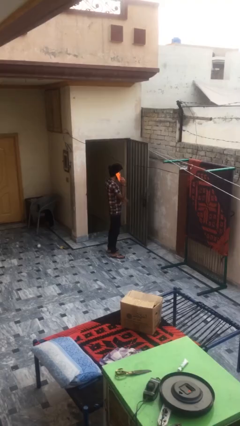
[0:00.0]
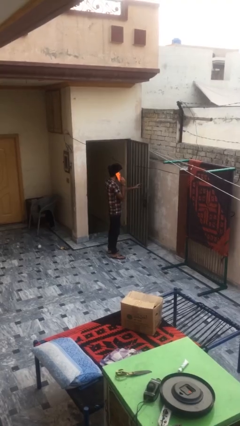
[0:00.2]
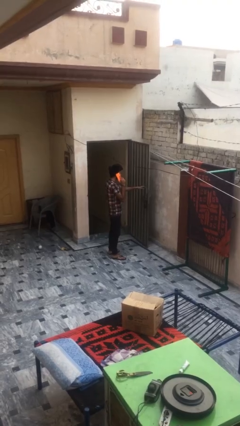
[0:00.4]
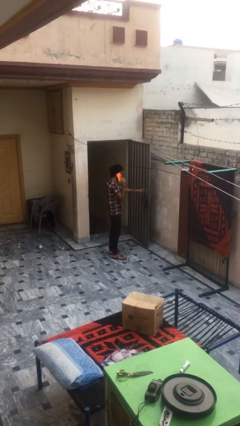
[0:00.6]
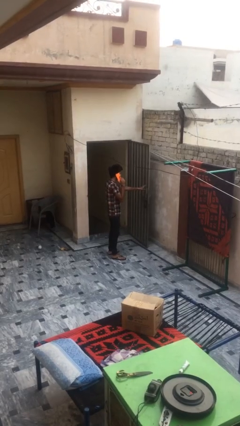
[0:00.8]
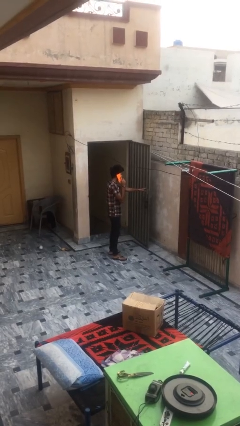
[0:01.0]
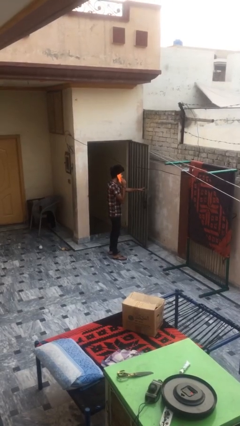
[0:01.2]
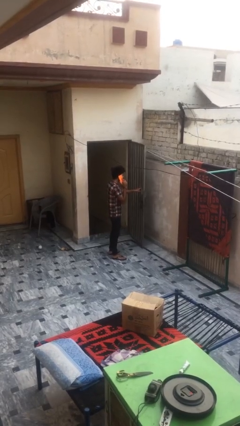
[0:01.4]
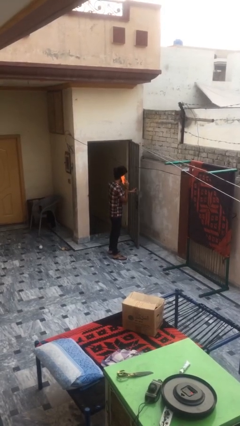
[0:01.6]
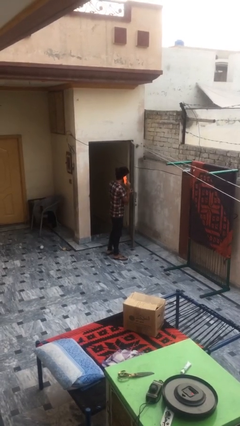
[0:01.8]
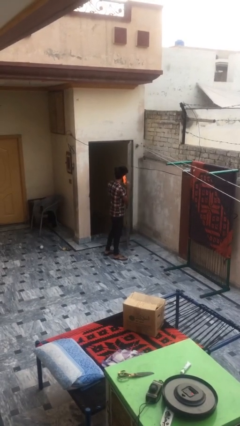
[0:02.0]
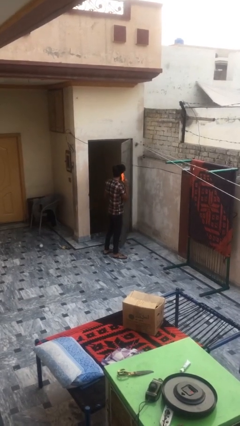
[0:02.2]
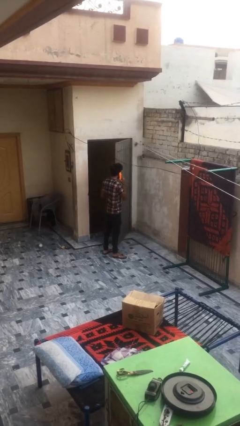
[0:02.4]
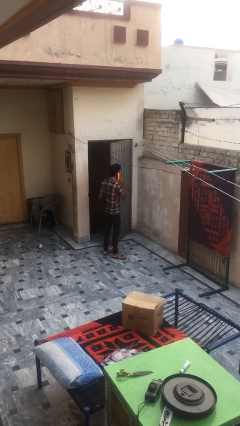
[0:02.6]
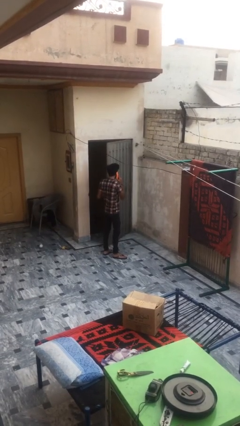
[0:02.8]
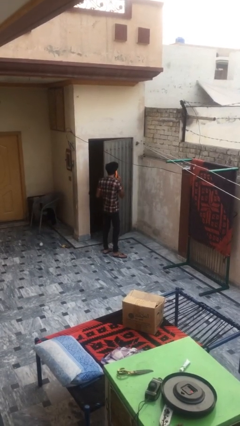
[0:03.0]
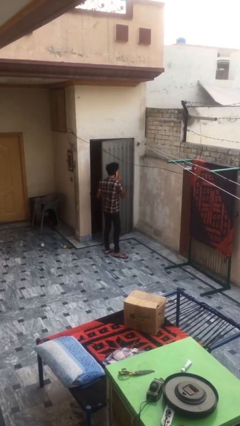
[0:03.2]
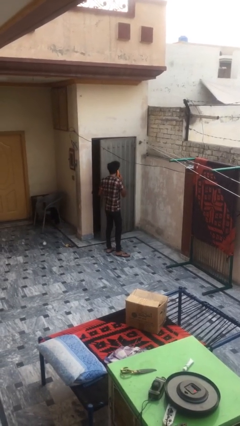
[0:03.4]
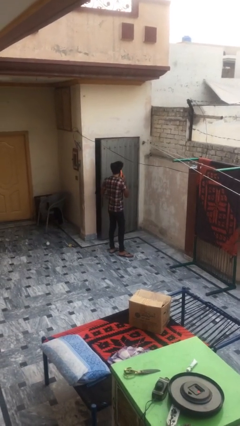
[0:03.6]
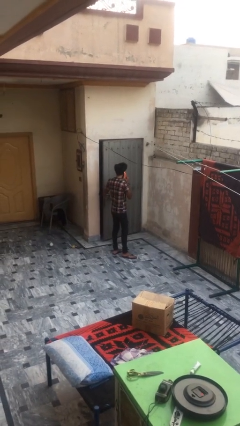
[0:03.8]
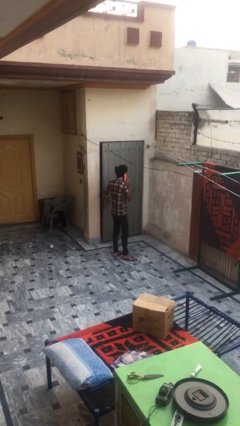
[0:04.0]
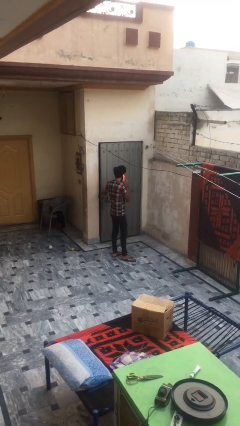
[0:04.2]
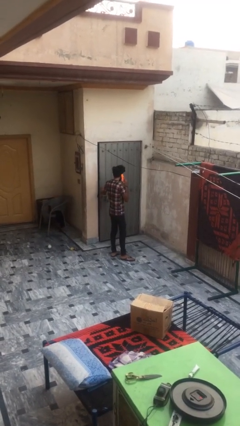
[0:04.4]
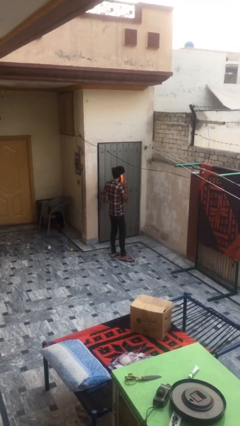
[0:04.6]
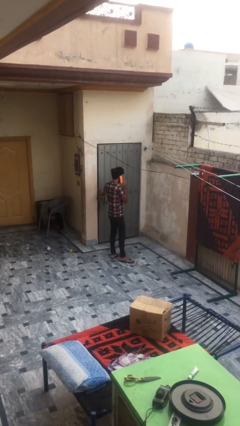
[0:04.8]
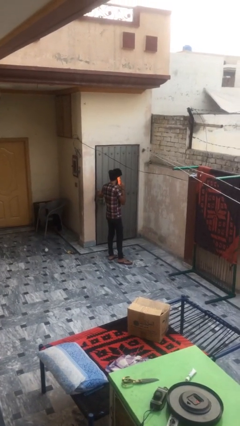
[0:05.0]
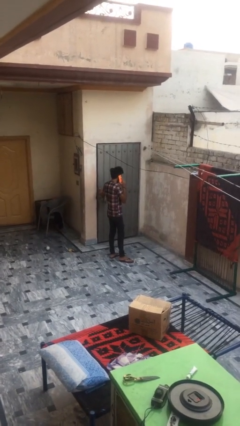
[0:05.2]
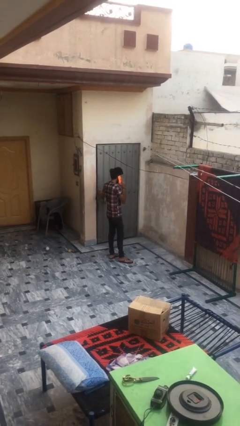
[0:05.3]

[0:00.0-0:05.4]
person closes facility door

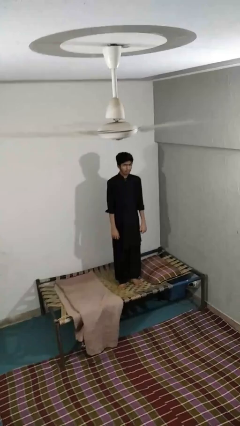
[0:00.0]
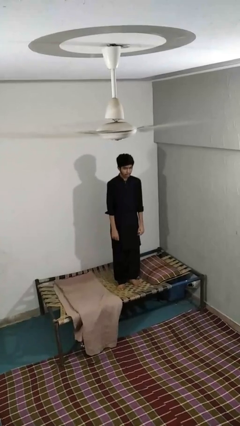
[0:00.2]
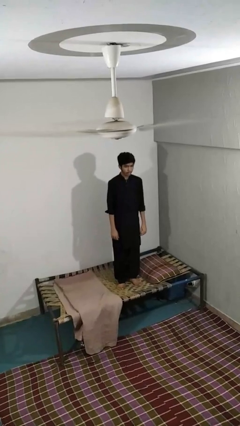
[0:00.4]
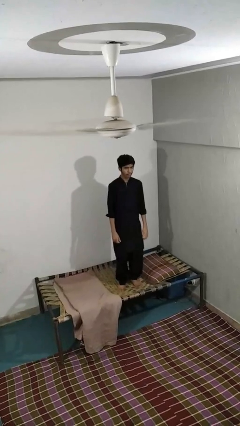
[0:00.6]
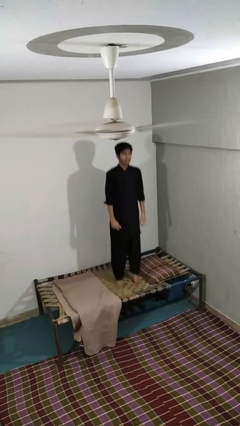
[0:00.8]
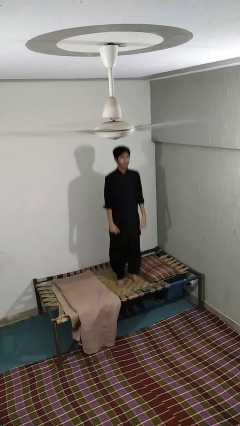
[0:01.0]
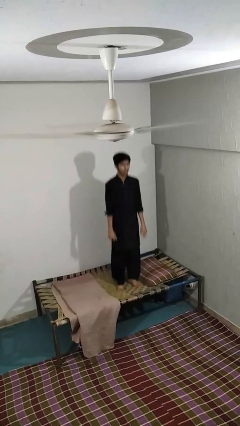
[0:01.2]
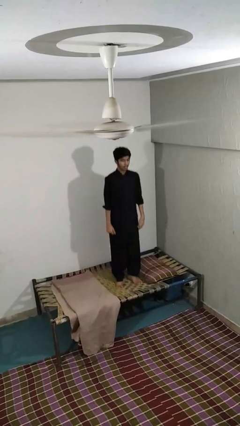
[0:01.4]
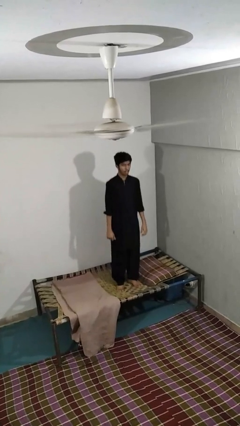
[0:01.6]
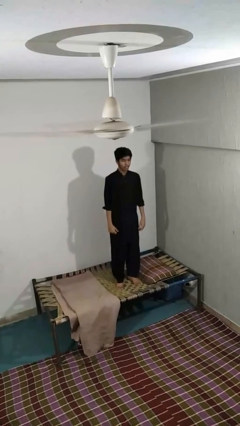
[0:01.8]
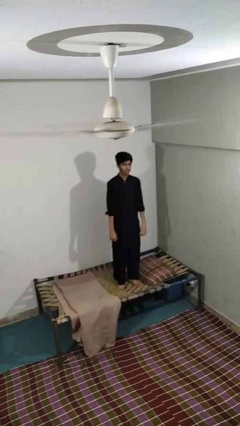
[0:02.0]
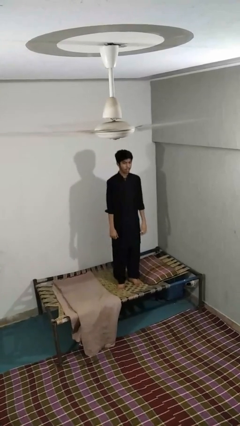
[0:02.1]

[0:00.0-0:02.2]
person jumps on bed

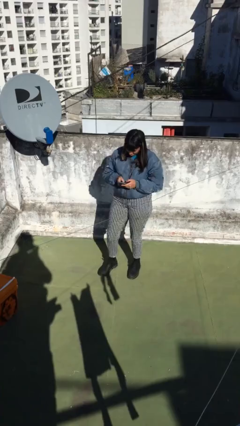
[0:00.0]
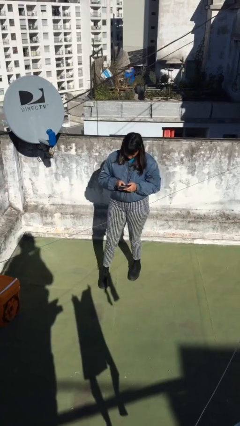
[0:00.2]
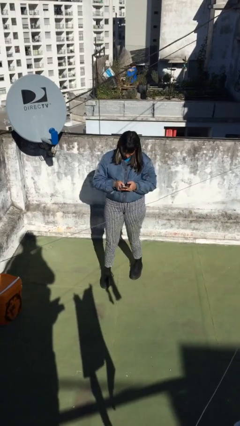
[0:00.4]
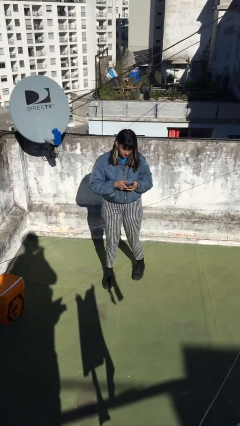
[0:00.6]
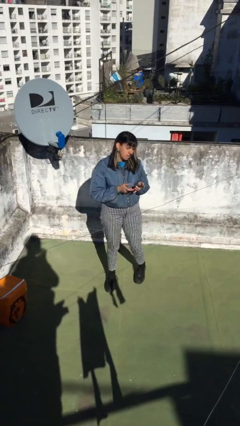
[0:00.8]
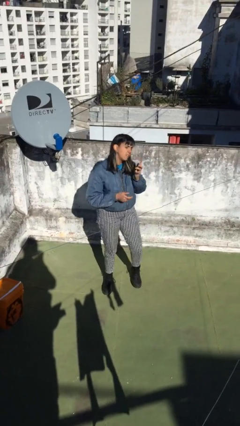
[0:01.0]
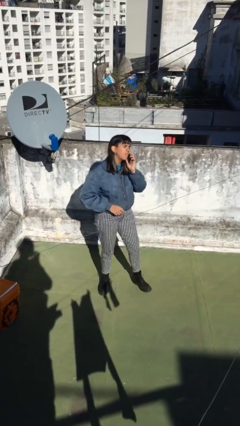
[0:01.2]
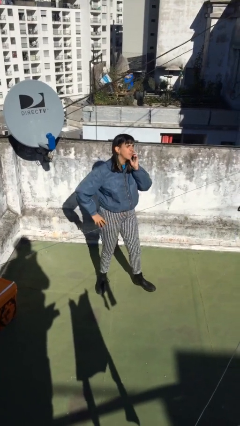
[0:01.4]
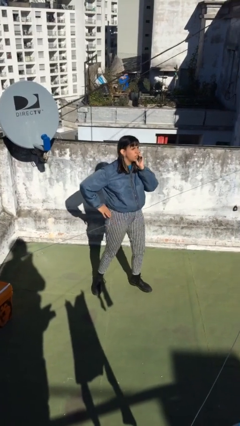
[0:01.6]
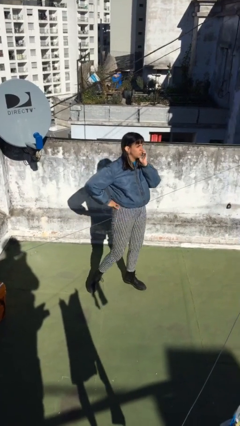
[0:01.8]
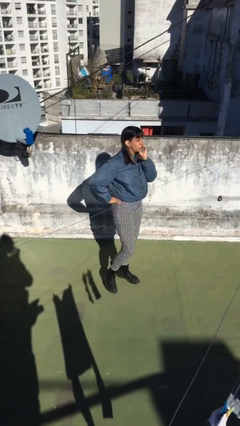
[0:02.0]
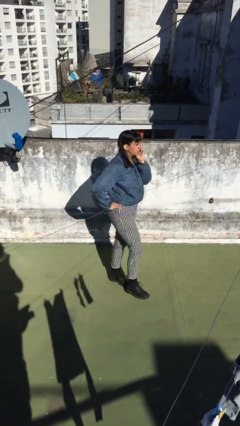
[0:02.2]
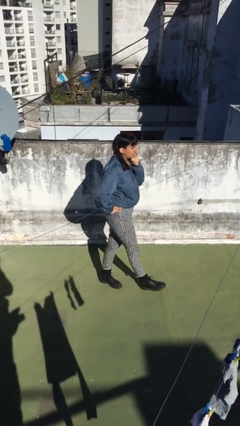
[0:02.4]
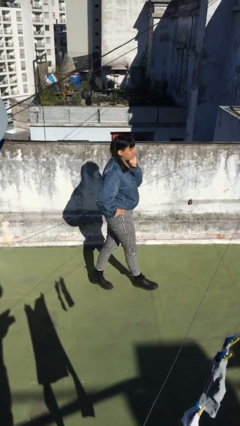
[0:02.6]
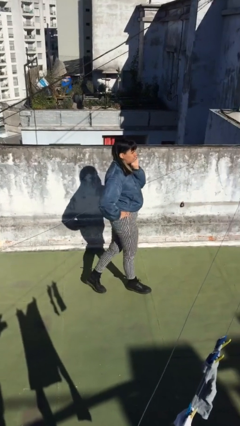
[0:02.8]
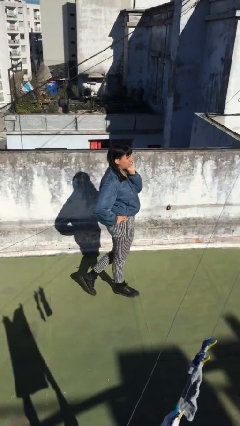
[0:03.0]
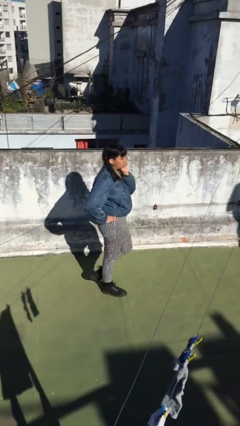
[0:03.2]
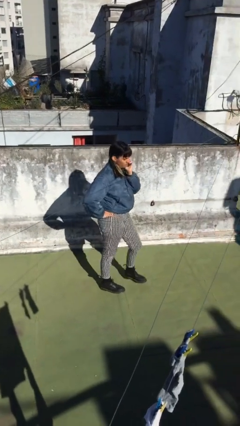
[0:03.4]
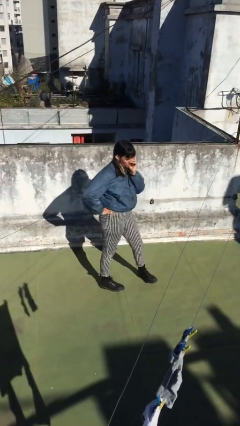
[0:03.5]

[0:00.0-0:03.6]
person talks on phone

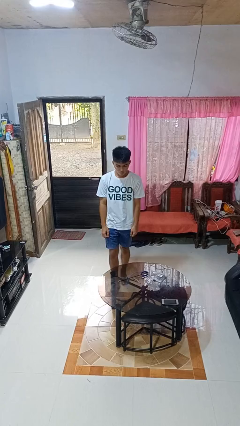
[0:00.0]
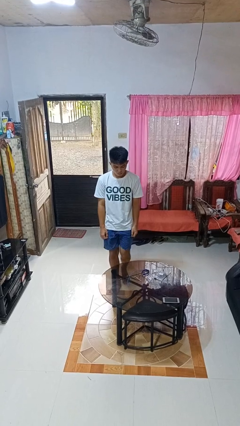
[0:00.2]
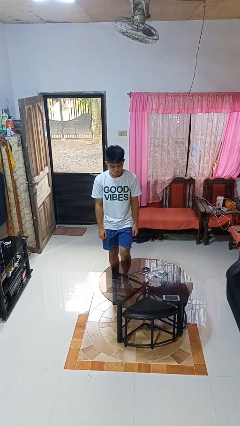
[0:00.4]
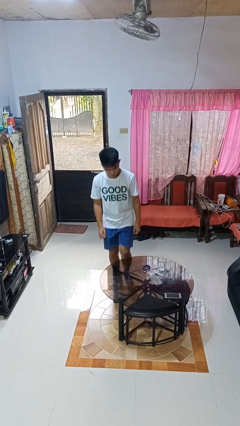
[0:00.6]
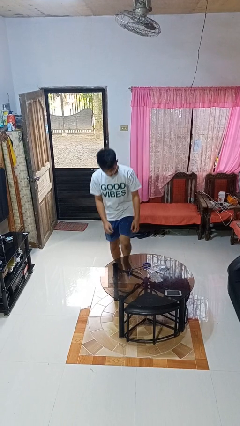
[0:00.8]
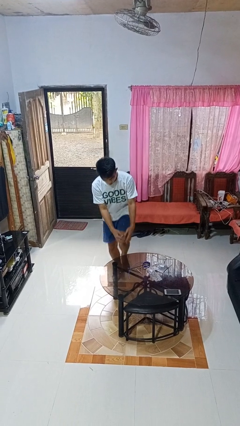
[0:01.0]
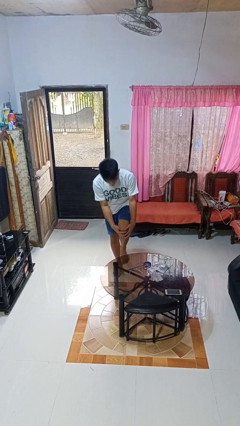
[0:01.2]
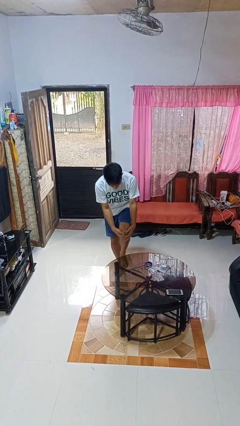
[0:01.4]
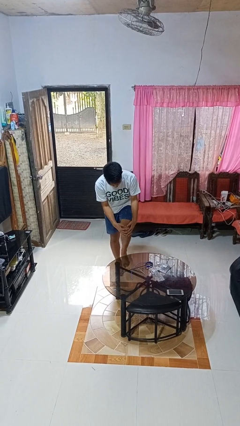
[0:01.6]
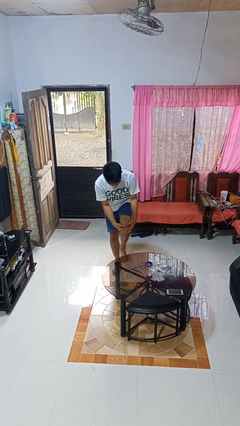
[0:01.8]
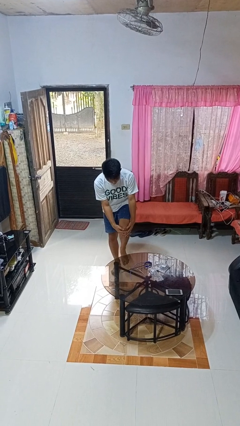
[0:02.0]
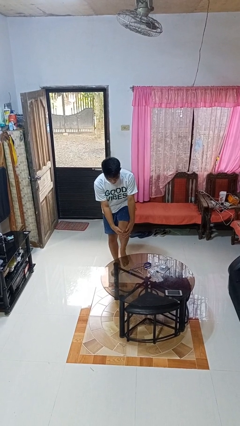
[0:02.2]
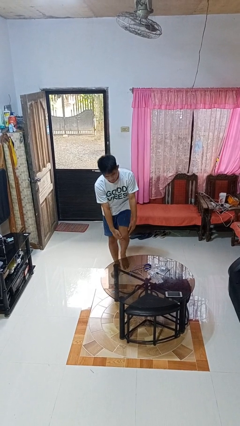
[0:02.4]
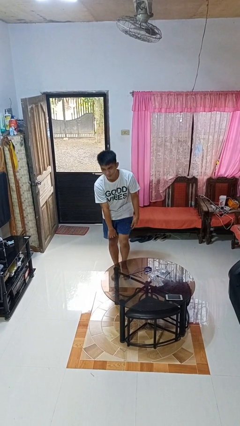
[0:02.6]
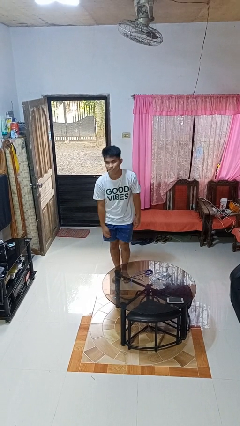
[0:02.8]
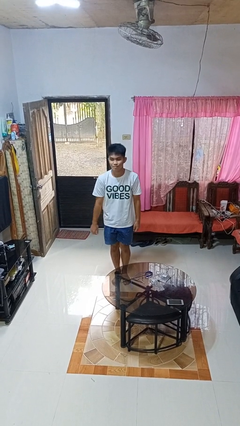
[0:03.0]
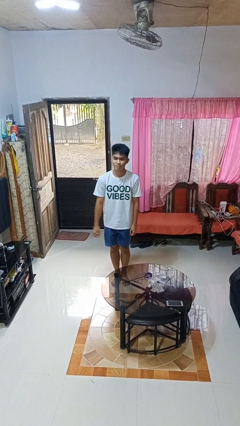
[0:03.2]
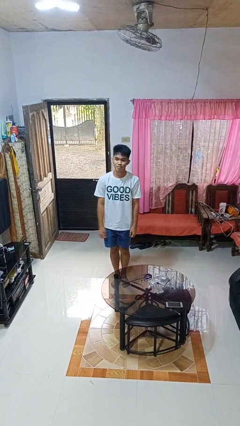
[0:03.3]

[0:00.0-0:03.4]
person bumps into table

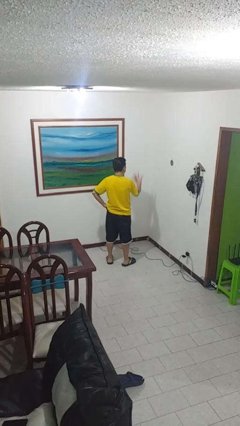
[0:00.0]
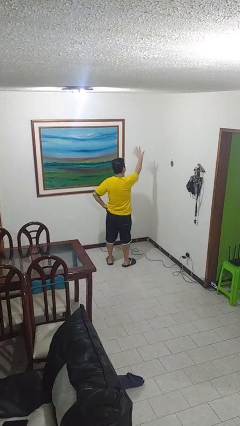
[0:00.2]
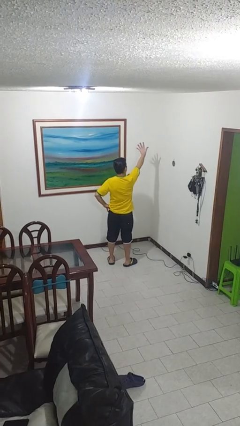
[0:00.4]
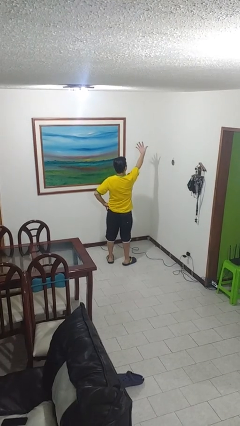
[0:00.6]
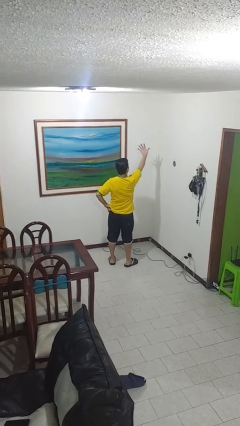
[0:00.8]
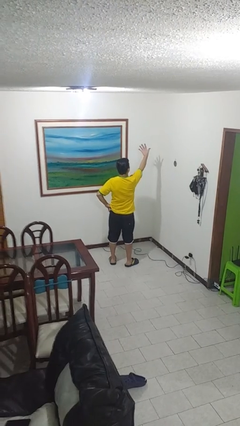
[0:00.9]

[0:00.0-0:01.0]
person gestures number five

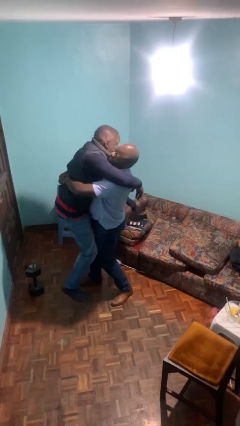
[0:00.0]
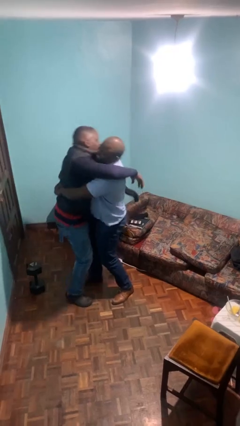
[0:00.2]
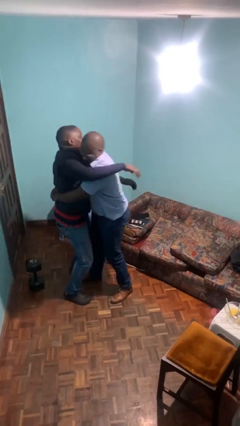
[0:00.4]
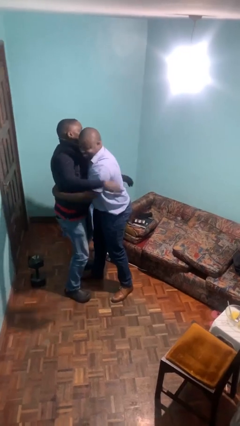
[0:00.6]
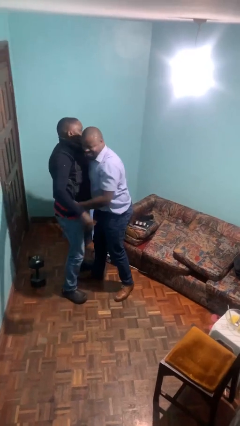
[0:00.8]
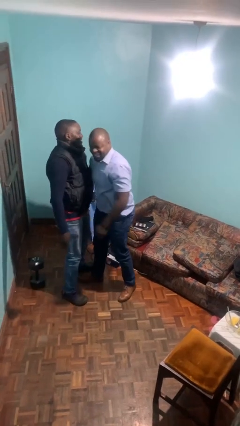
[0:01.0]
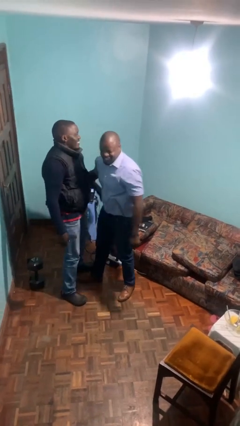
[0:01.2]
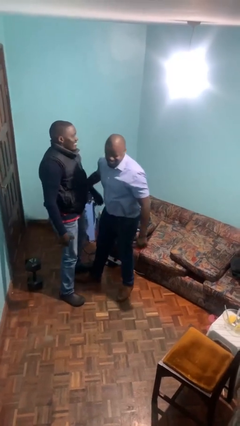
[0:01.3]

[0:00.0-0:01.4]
person puts down person

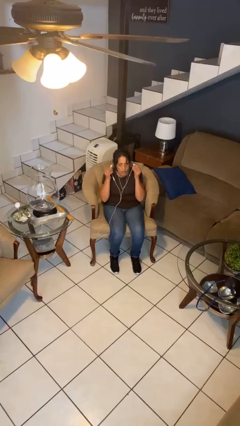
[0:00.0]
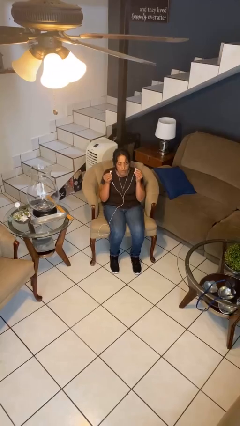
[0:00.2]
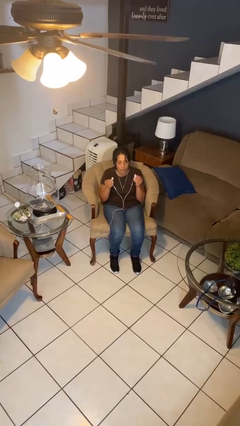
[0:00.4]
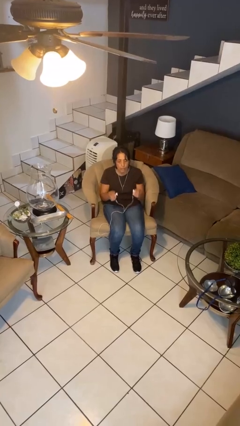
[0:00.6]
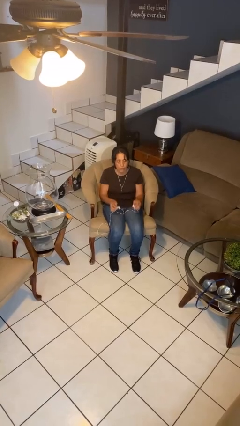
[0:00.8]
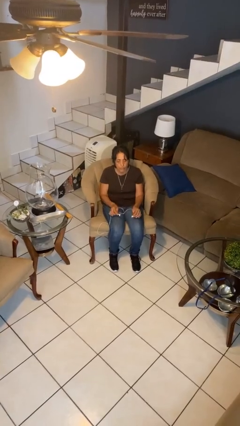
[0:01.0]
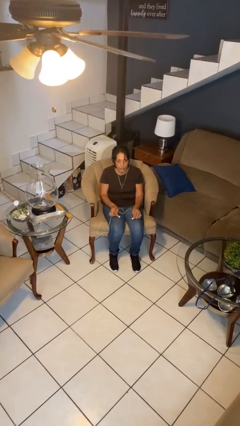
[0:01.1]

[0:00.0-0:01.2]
person takes off headphones
